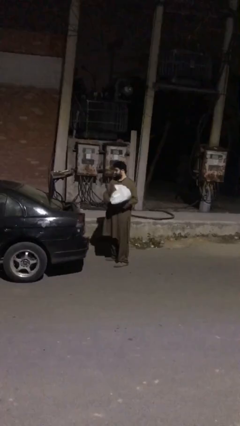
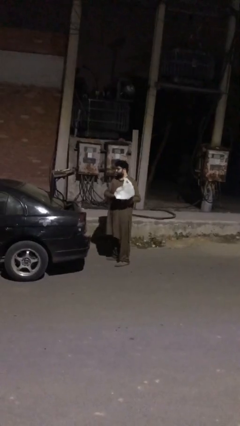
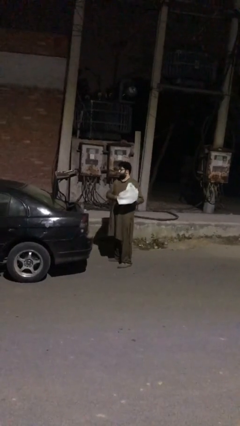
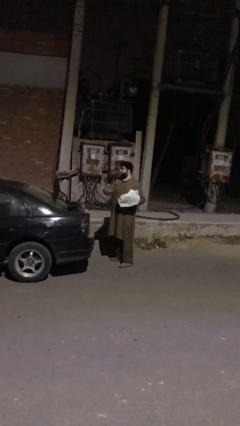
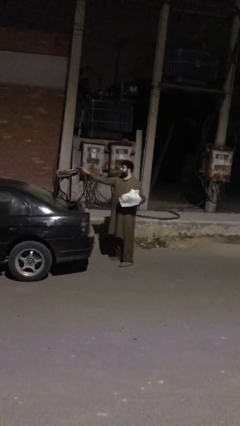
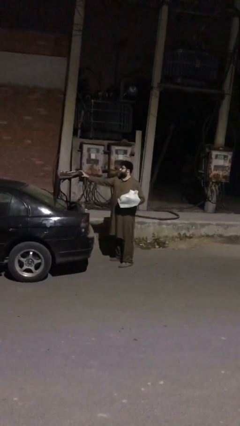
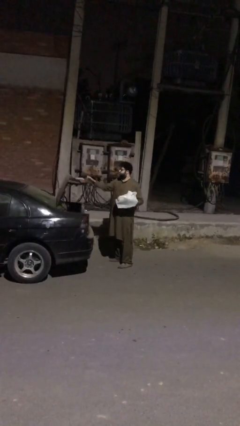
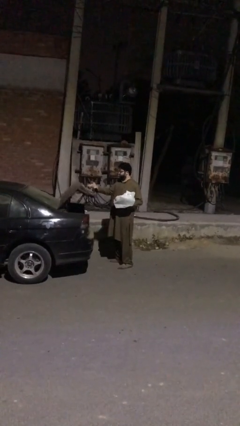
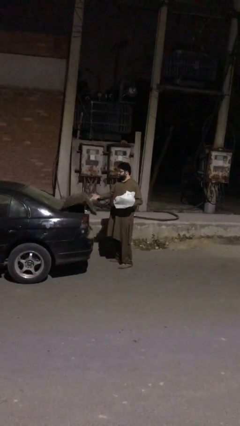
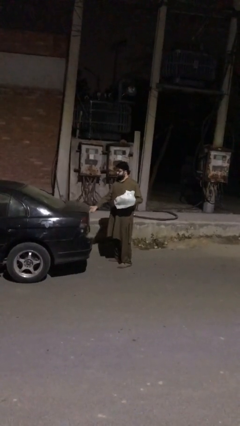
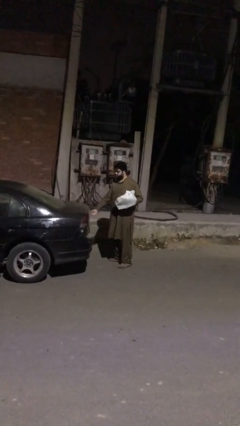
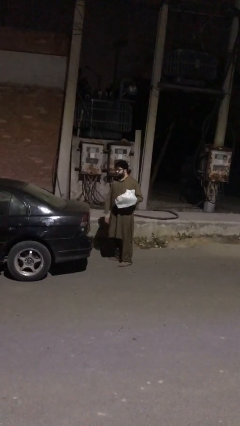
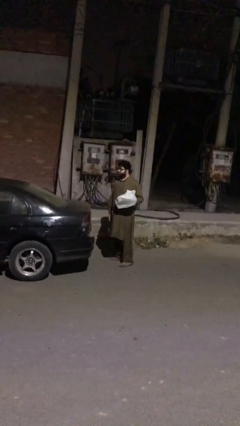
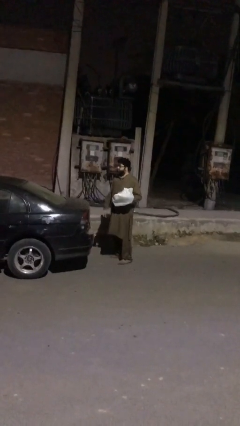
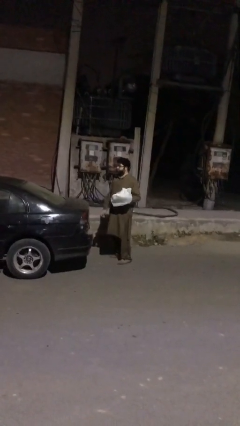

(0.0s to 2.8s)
person closes car trunk

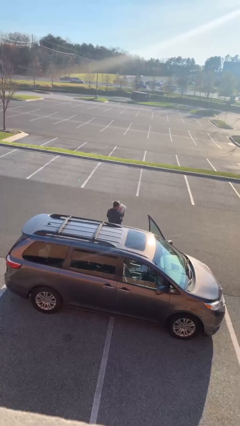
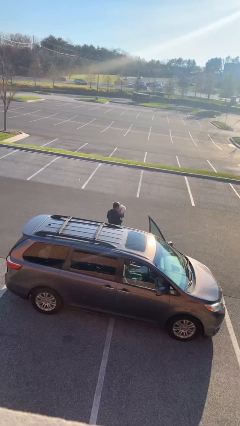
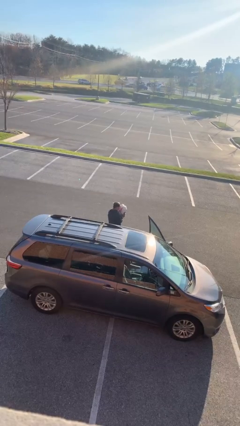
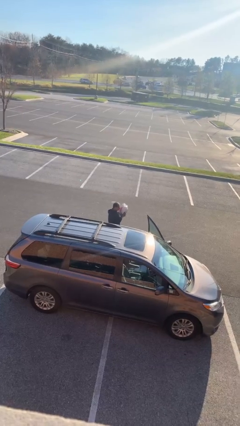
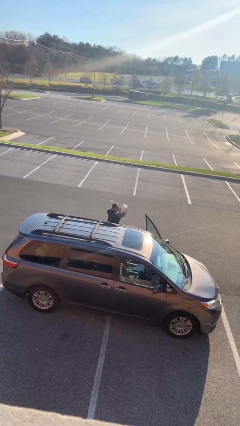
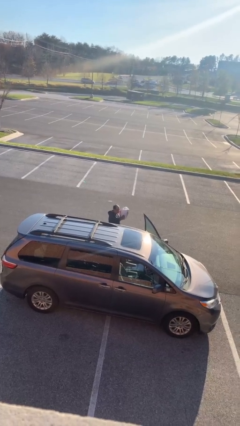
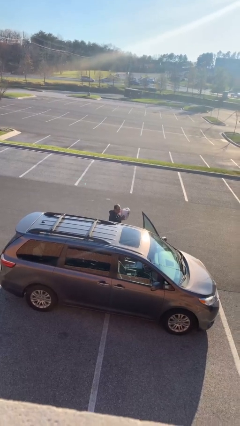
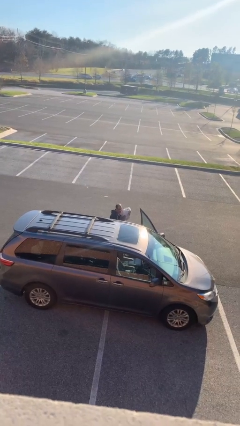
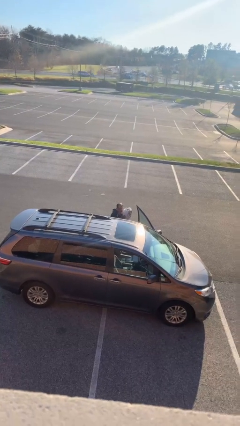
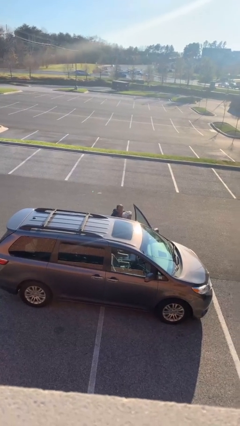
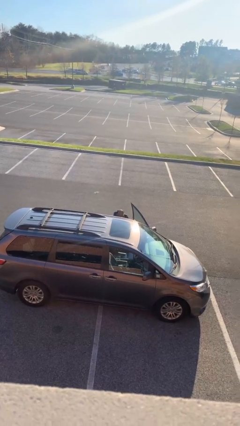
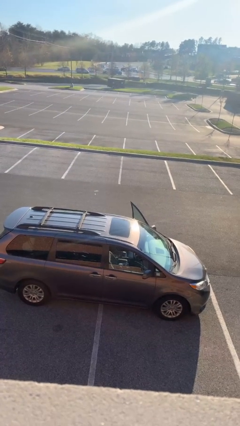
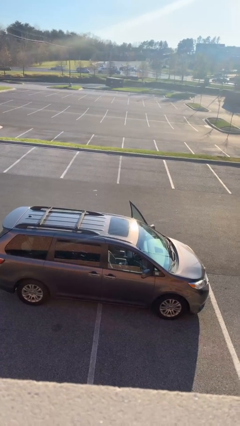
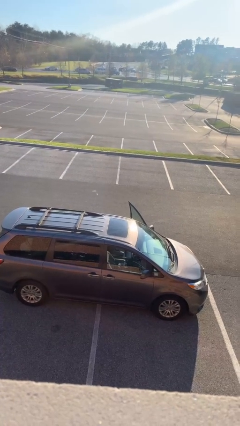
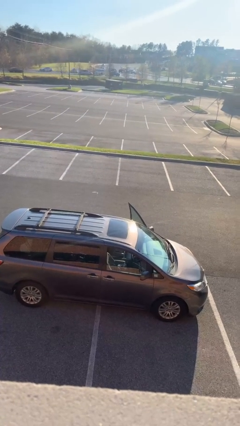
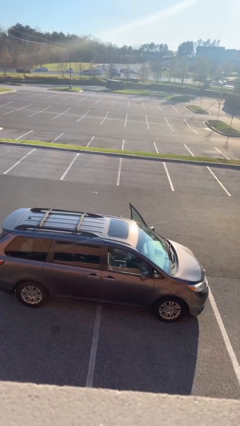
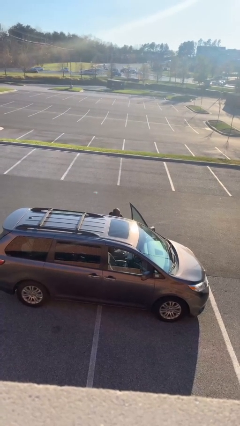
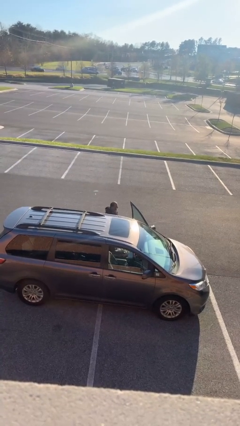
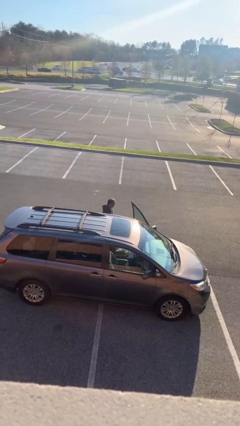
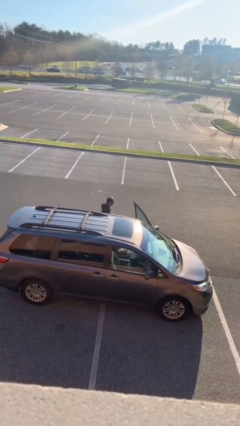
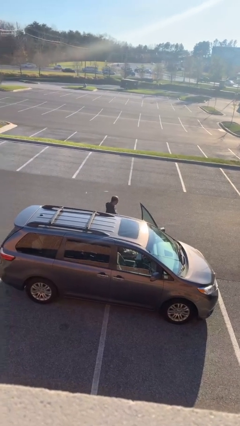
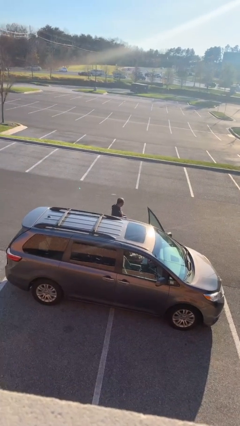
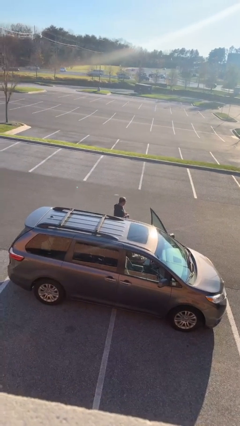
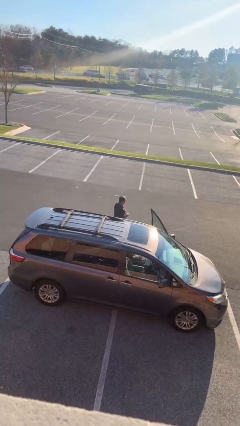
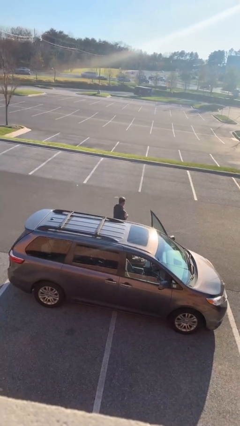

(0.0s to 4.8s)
person loads car

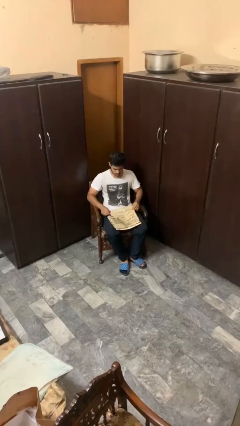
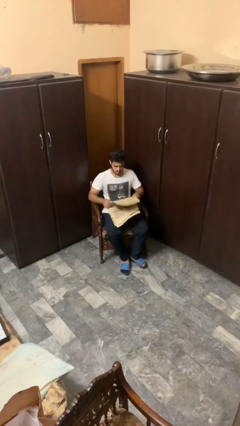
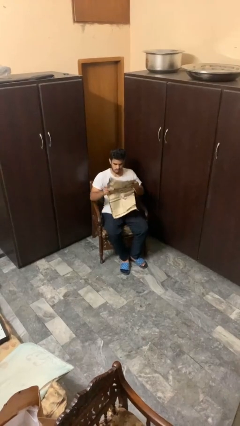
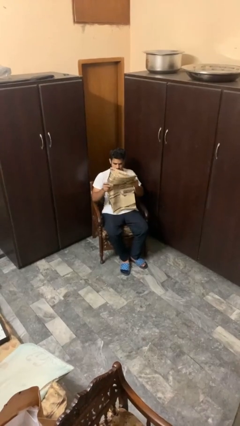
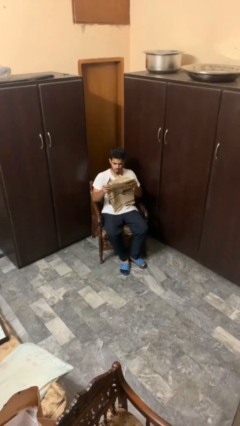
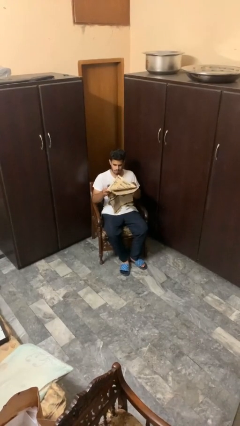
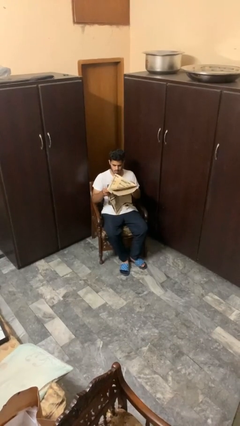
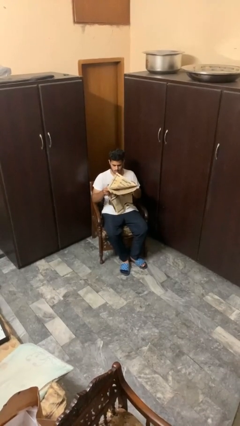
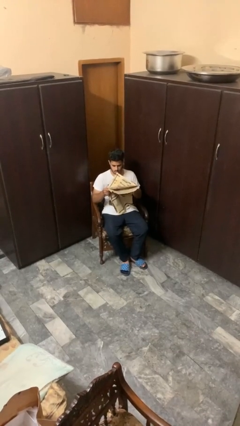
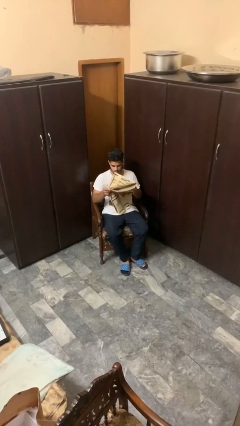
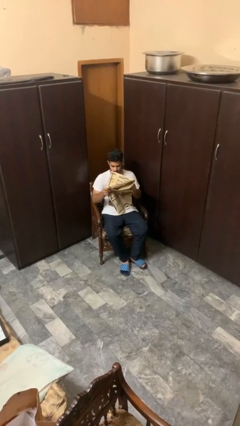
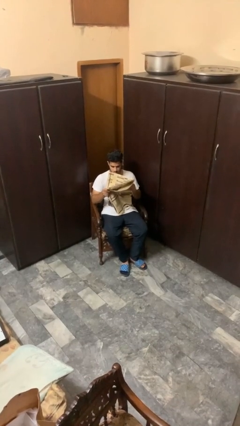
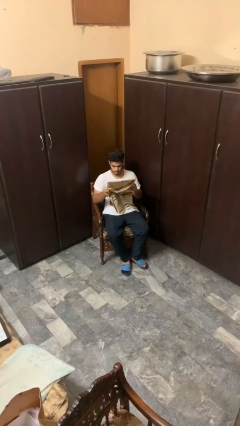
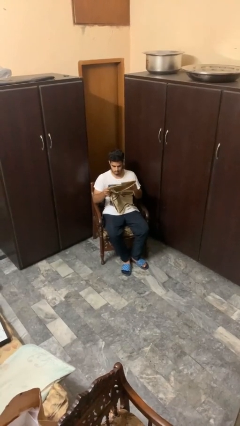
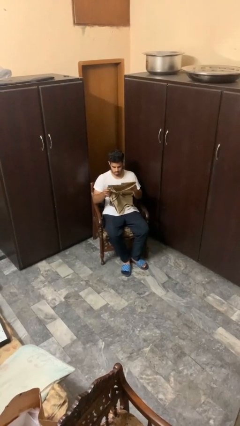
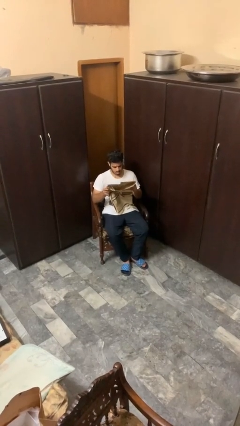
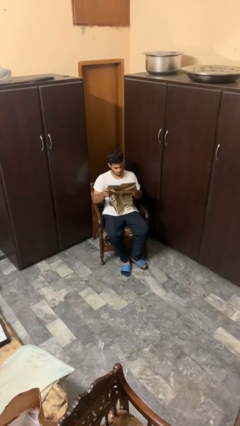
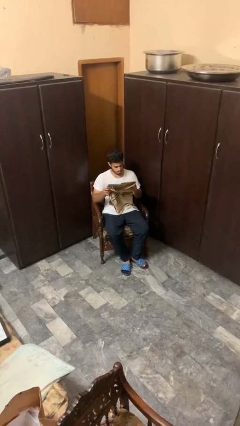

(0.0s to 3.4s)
person reads newspaper

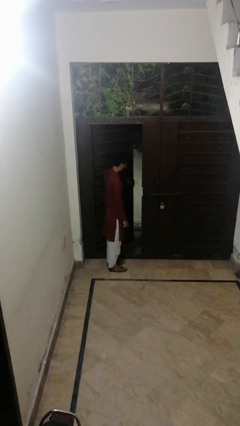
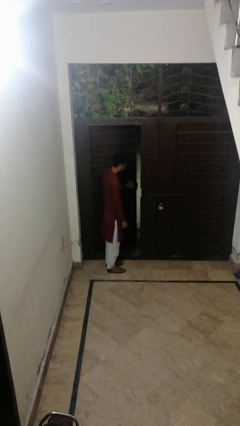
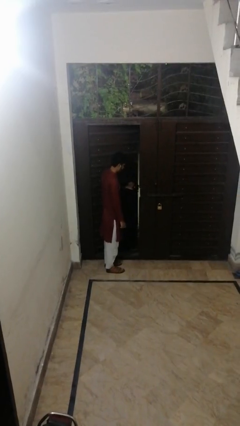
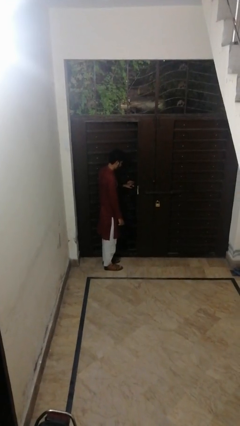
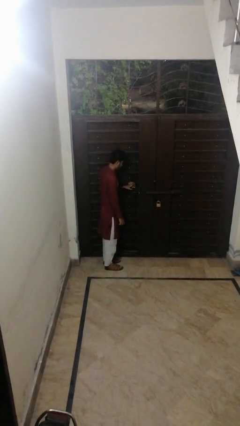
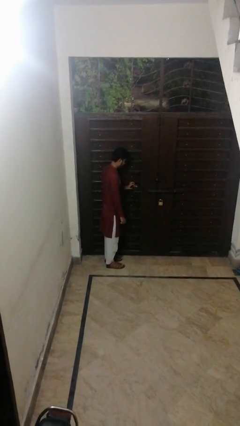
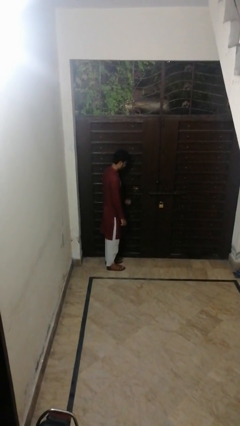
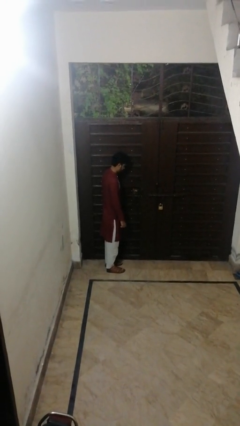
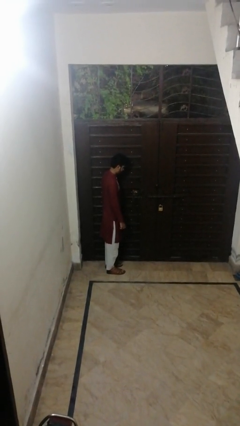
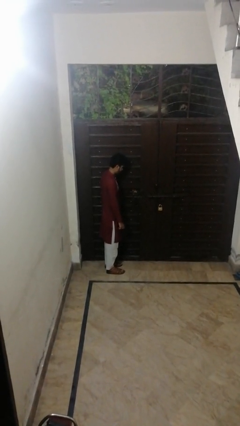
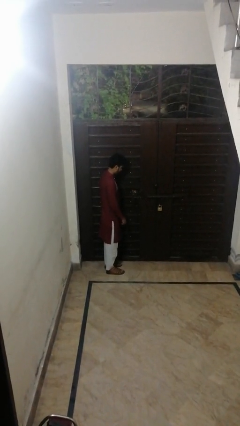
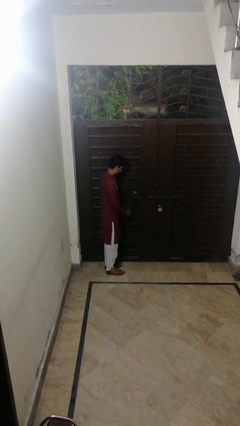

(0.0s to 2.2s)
person closes facility door

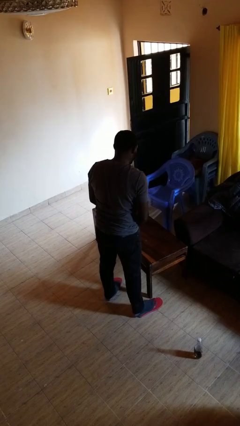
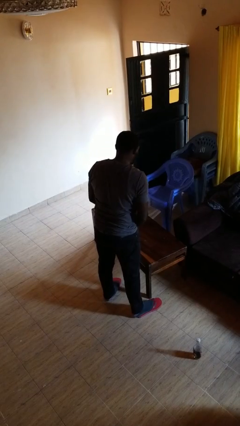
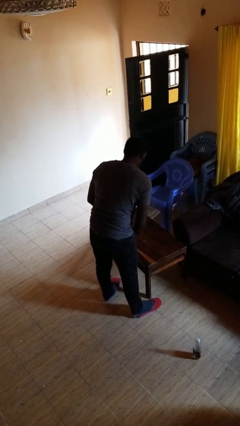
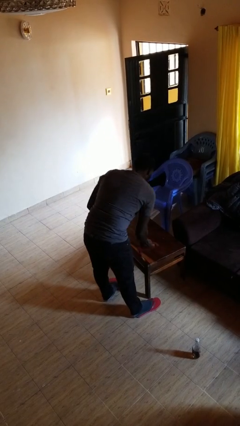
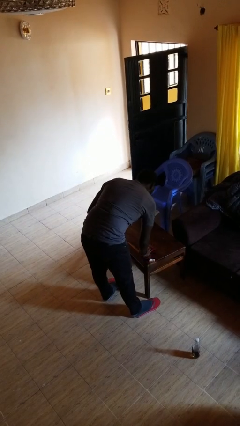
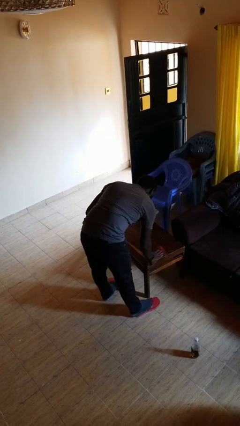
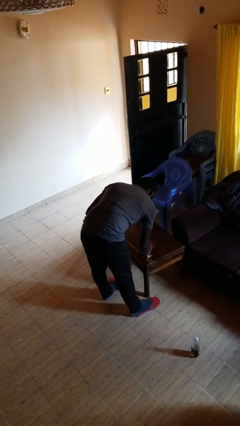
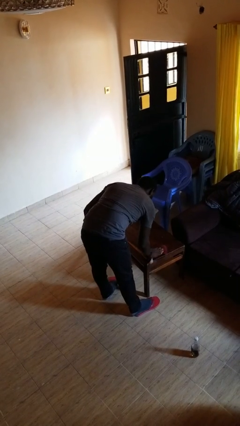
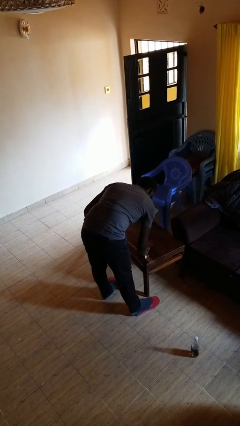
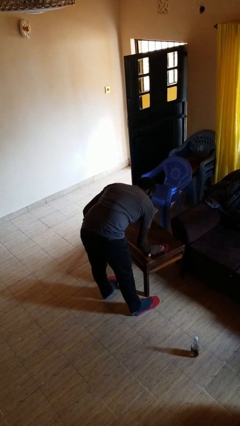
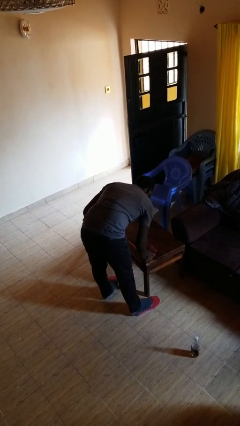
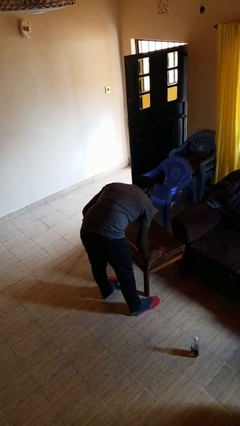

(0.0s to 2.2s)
person cleans table with rag

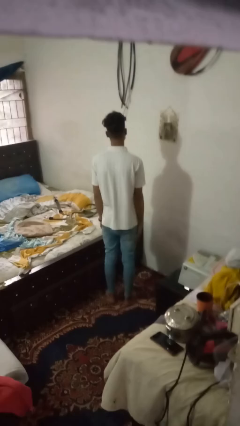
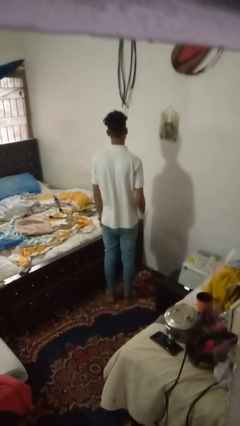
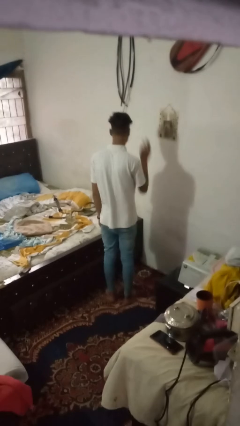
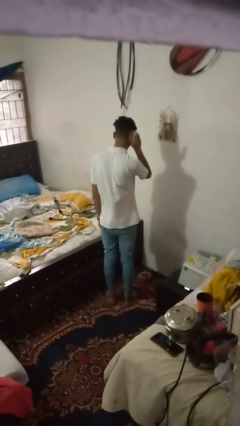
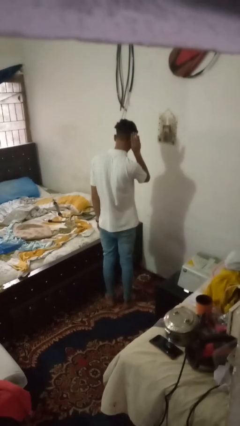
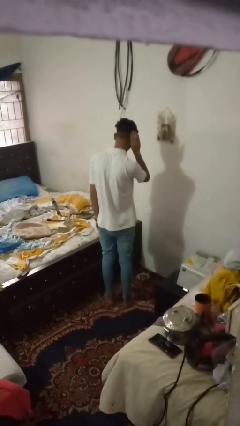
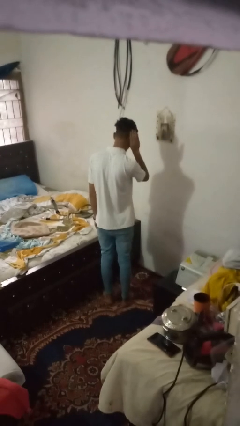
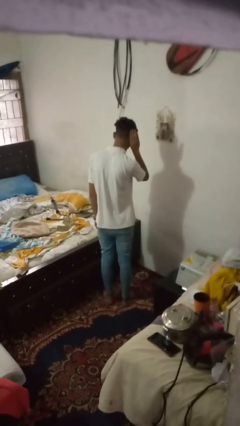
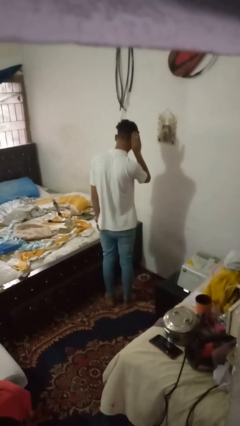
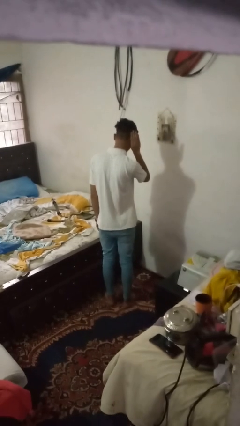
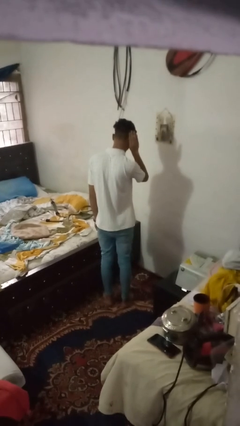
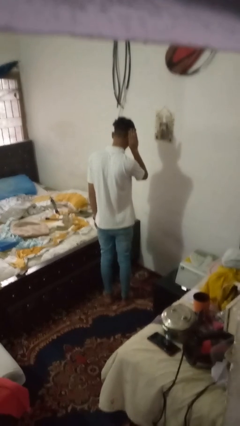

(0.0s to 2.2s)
person gestures listen closely
